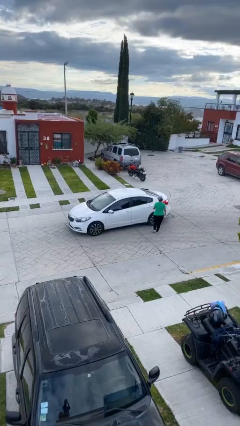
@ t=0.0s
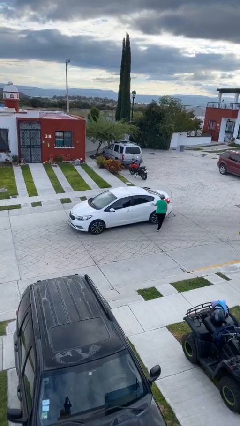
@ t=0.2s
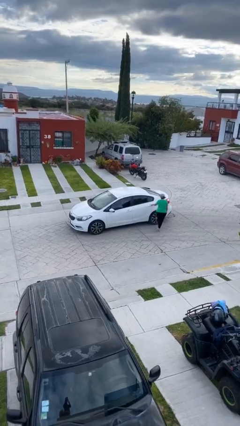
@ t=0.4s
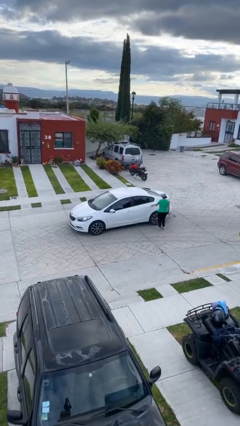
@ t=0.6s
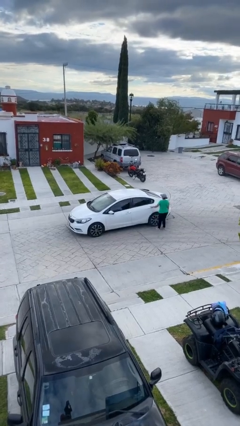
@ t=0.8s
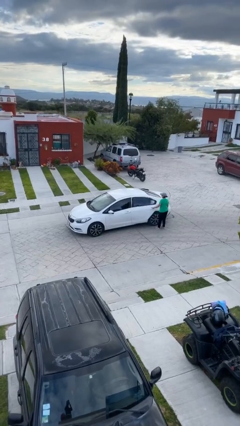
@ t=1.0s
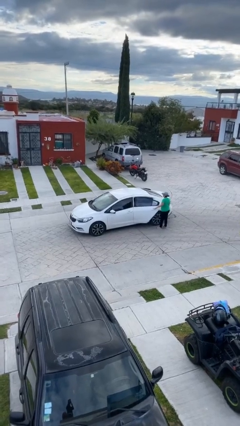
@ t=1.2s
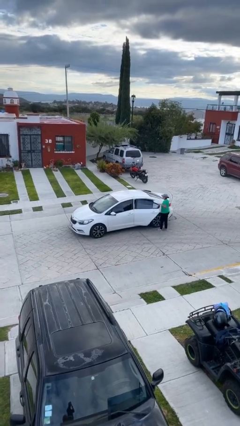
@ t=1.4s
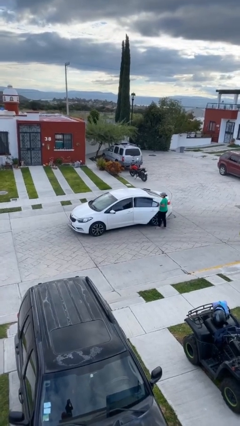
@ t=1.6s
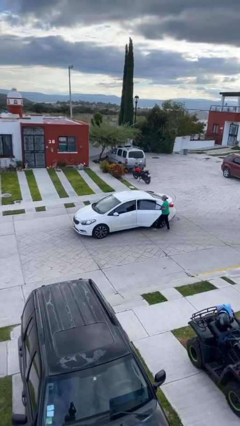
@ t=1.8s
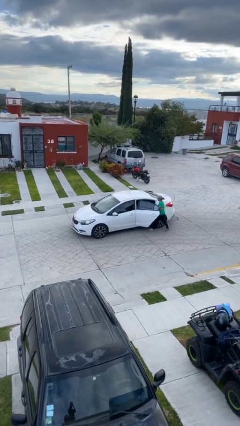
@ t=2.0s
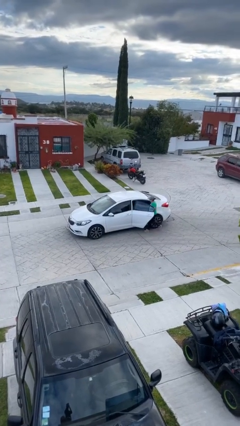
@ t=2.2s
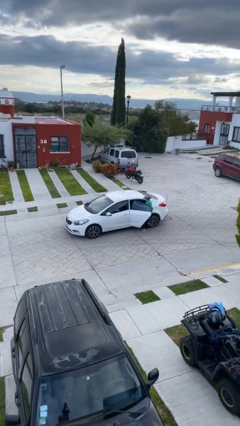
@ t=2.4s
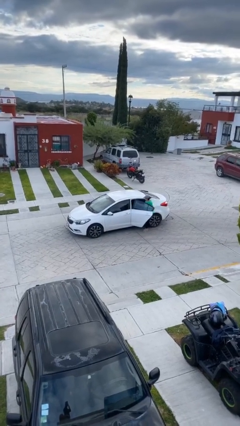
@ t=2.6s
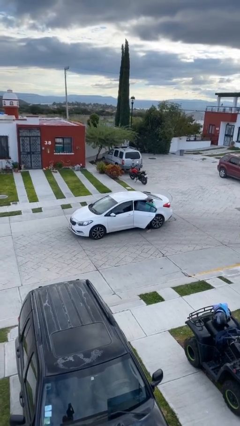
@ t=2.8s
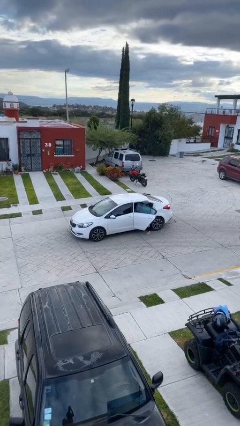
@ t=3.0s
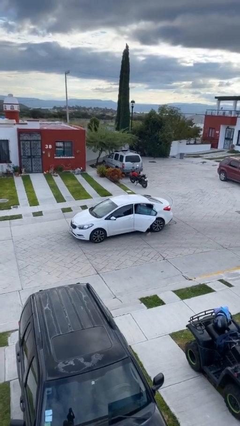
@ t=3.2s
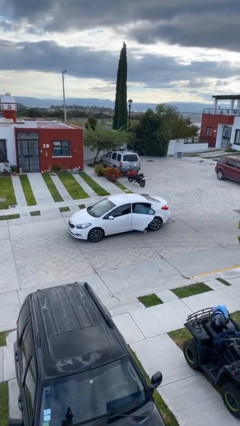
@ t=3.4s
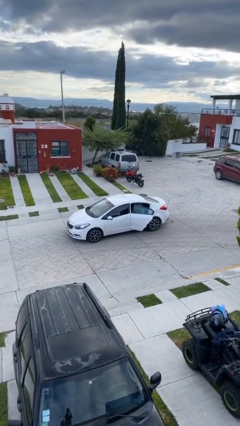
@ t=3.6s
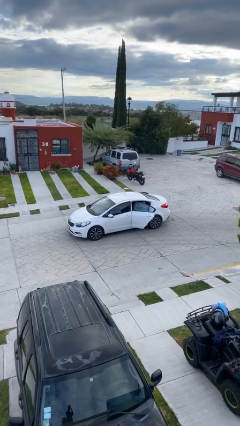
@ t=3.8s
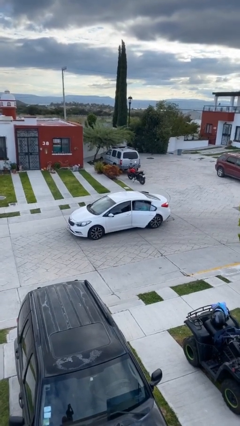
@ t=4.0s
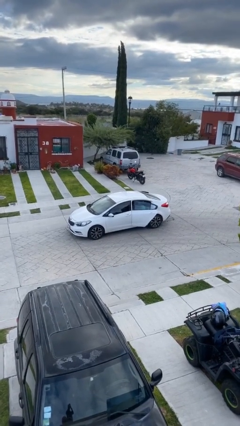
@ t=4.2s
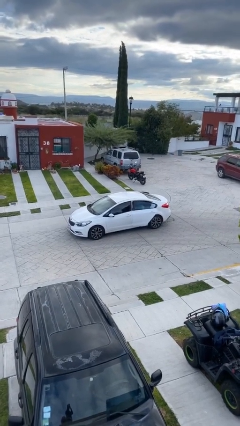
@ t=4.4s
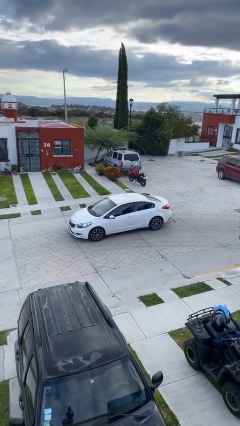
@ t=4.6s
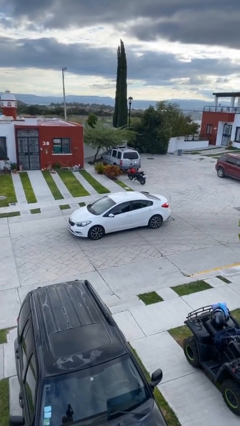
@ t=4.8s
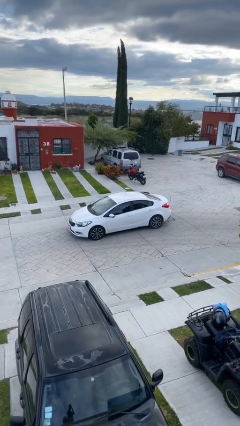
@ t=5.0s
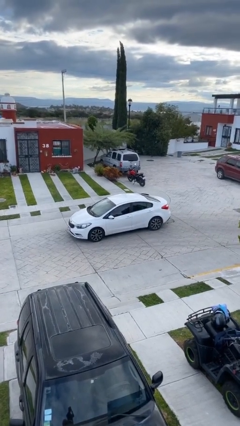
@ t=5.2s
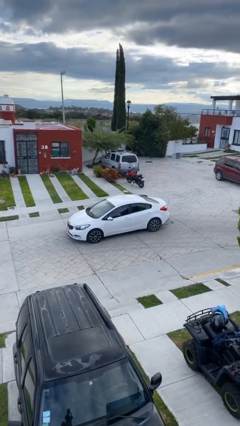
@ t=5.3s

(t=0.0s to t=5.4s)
car picks up person

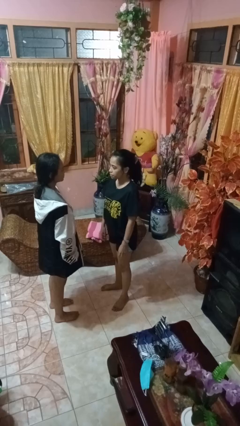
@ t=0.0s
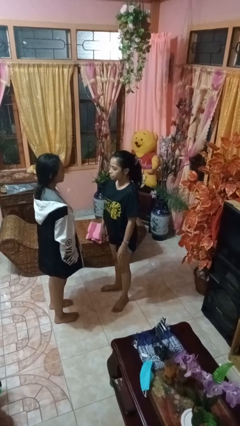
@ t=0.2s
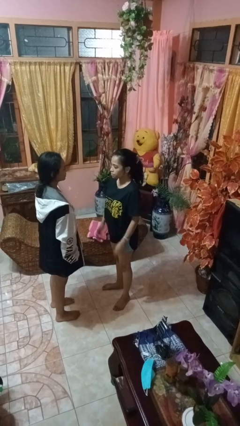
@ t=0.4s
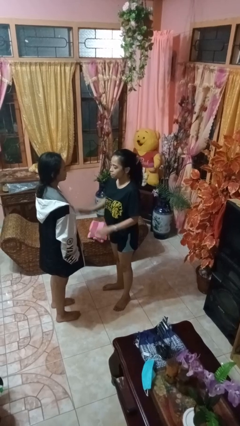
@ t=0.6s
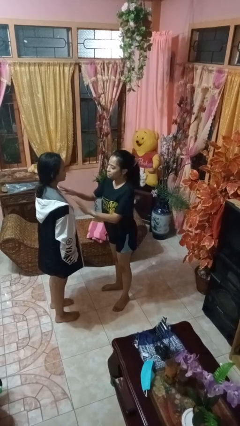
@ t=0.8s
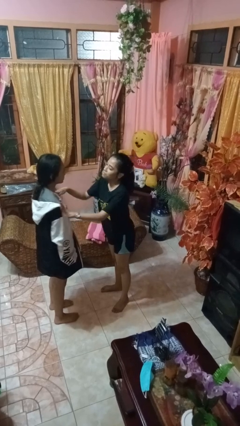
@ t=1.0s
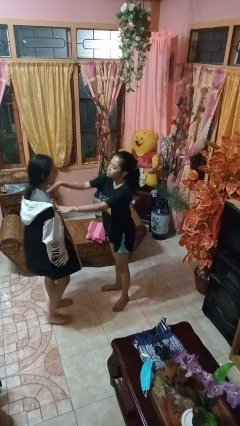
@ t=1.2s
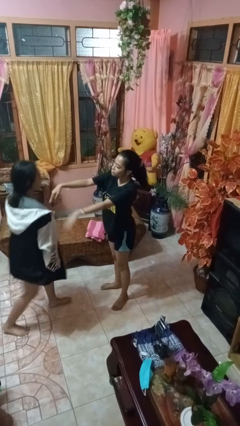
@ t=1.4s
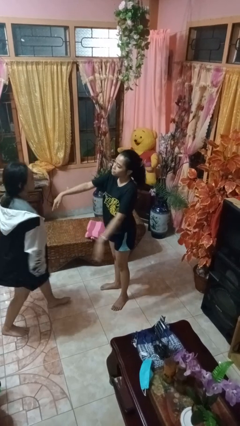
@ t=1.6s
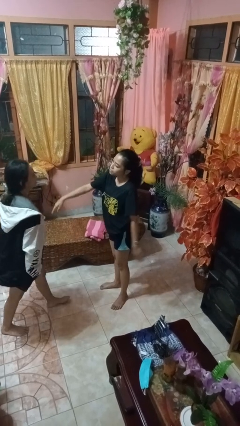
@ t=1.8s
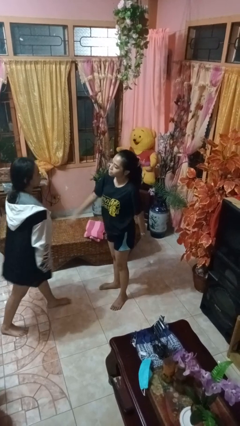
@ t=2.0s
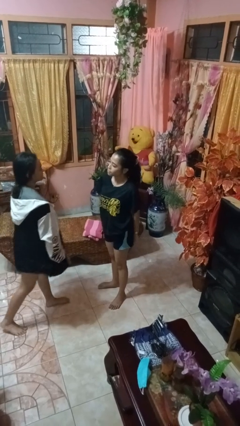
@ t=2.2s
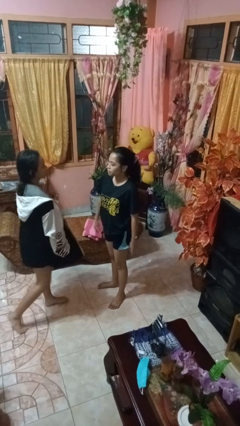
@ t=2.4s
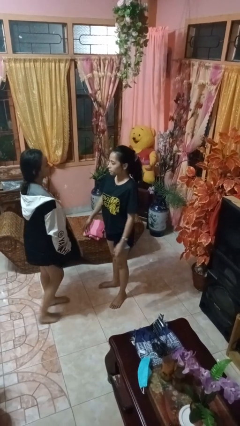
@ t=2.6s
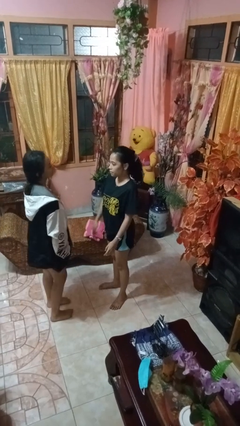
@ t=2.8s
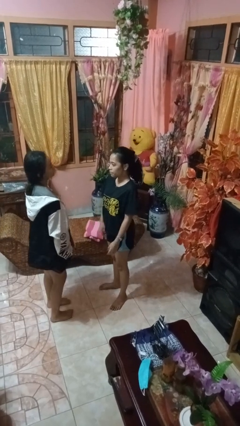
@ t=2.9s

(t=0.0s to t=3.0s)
person shoves person

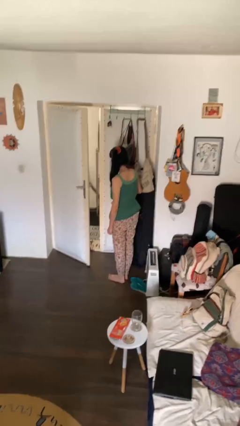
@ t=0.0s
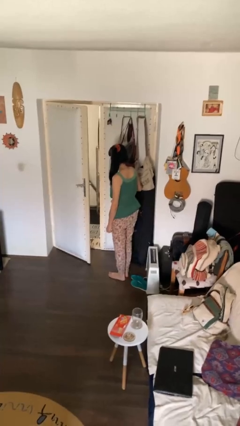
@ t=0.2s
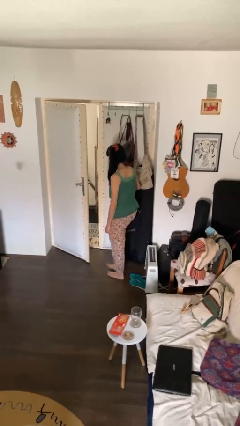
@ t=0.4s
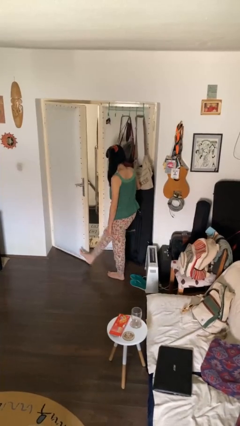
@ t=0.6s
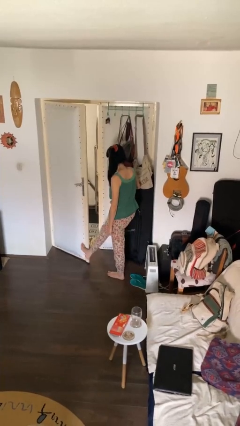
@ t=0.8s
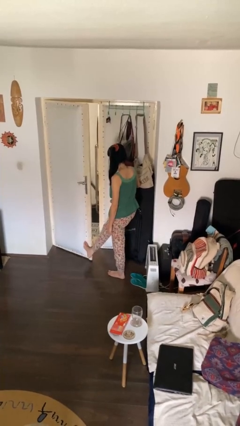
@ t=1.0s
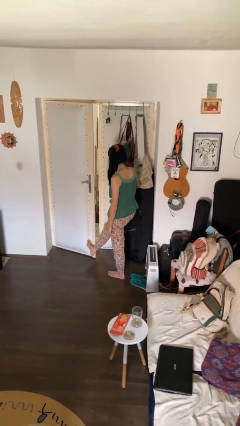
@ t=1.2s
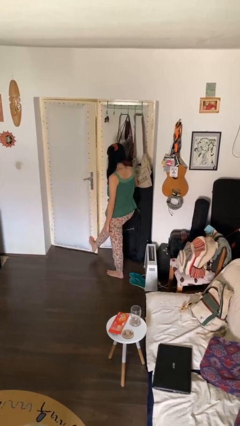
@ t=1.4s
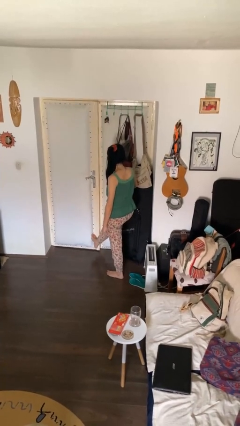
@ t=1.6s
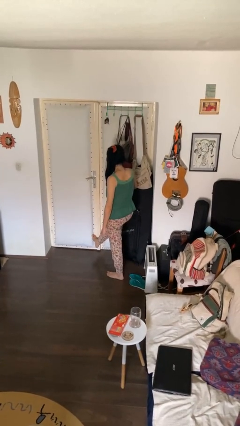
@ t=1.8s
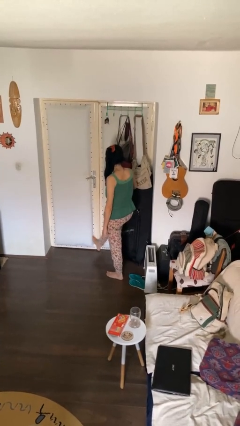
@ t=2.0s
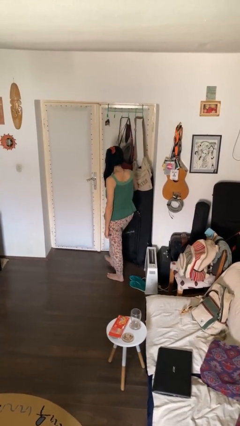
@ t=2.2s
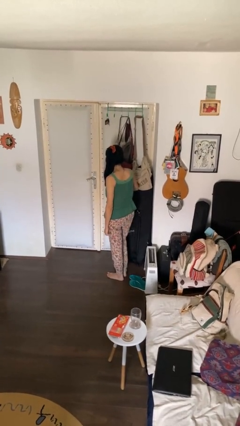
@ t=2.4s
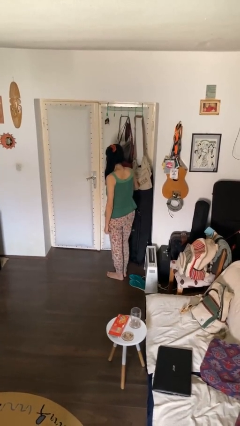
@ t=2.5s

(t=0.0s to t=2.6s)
person closes door with foot

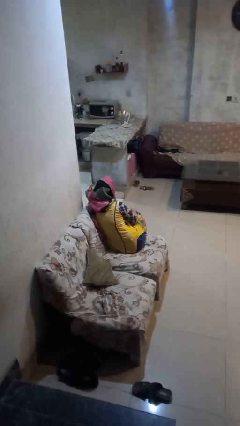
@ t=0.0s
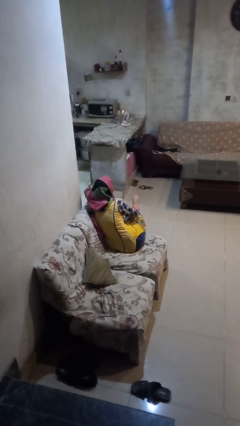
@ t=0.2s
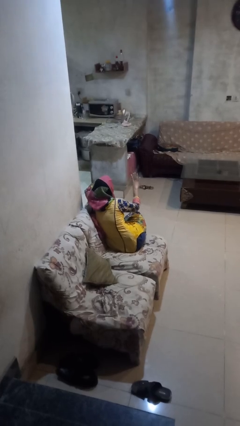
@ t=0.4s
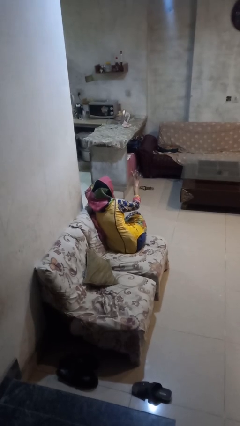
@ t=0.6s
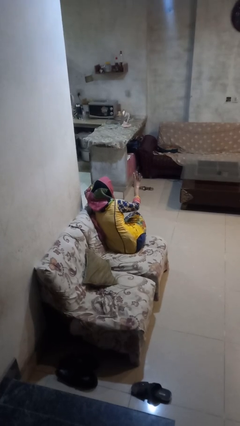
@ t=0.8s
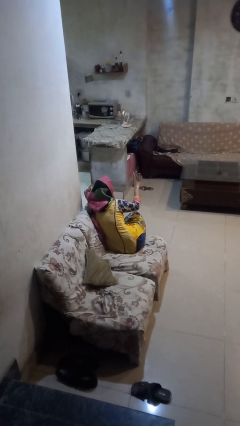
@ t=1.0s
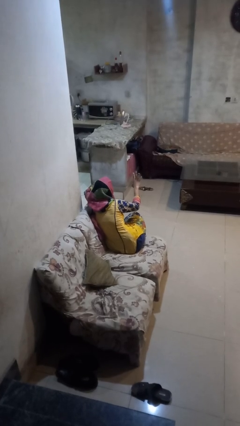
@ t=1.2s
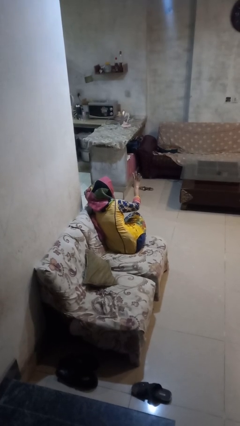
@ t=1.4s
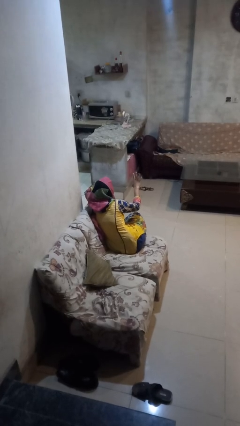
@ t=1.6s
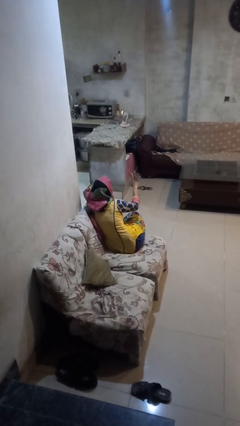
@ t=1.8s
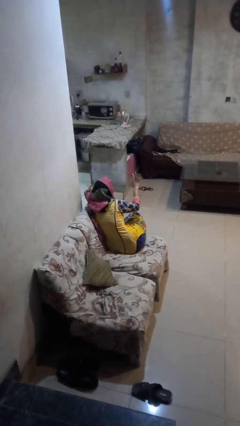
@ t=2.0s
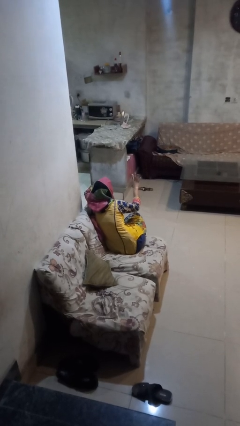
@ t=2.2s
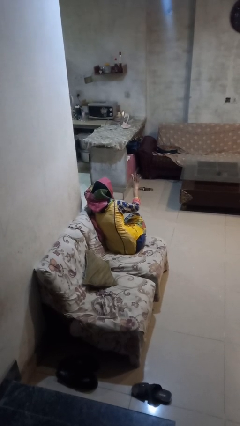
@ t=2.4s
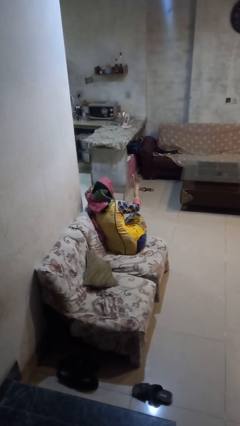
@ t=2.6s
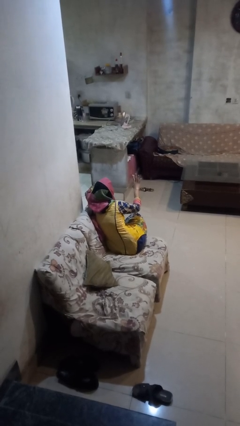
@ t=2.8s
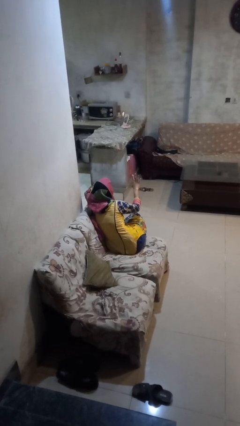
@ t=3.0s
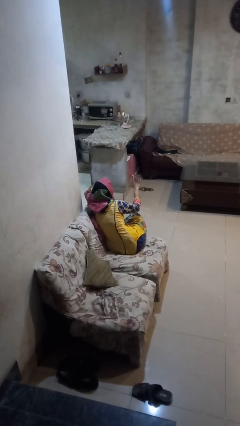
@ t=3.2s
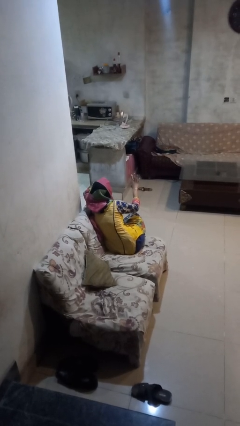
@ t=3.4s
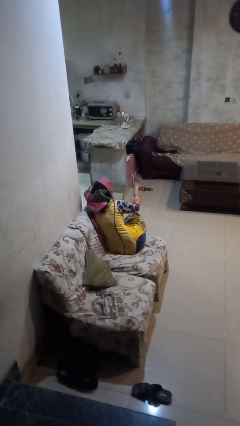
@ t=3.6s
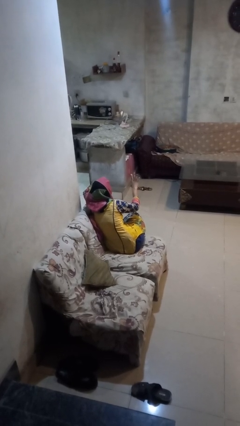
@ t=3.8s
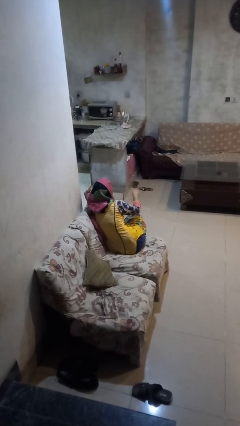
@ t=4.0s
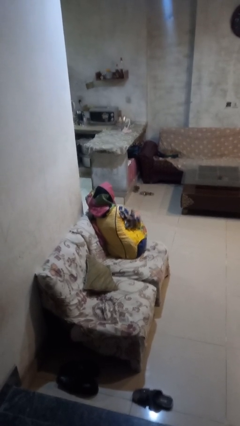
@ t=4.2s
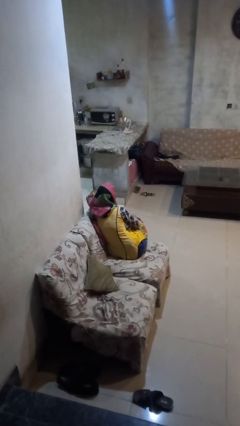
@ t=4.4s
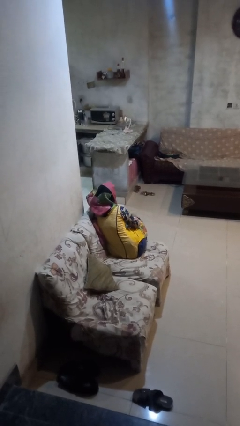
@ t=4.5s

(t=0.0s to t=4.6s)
person gestures number four

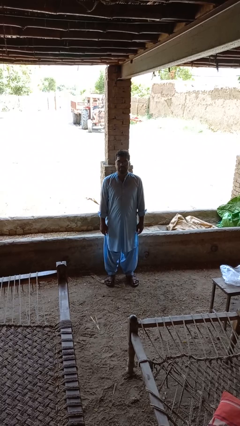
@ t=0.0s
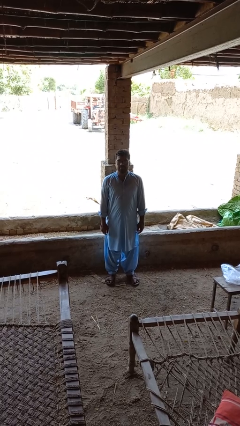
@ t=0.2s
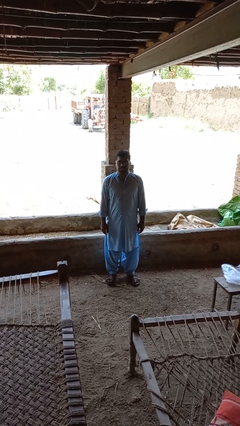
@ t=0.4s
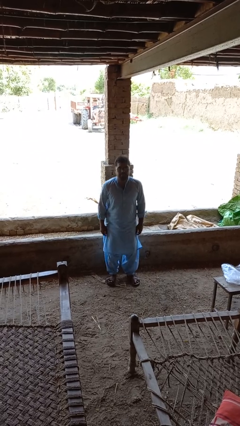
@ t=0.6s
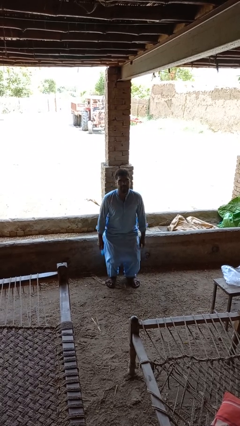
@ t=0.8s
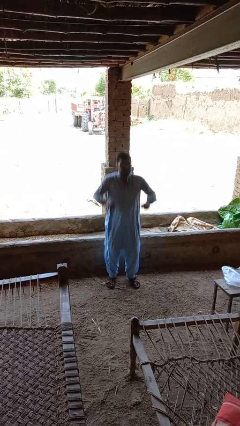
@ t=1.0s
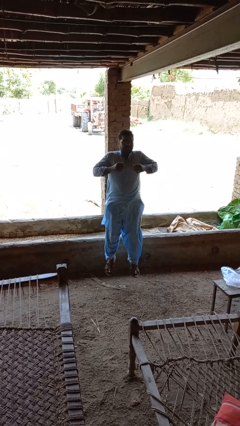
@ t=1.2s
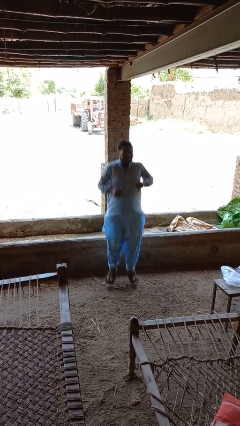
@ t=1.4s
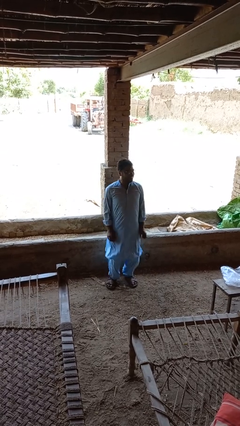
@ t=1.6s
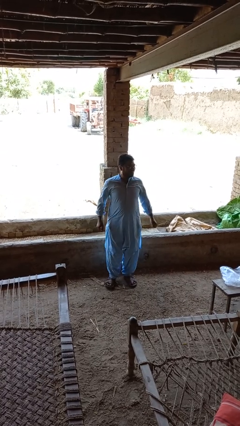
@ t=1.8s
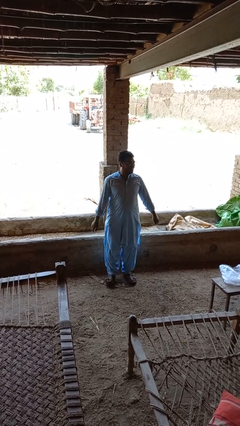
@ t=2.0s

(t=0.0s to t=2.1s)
person jumps
